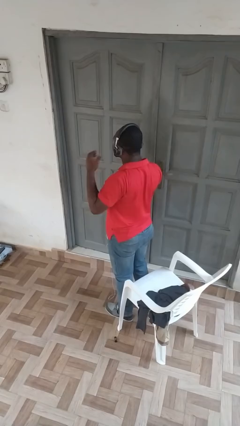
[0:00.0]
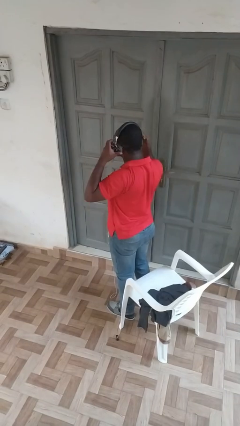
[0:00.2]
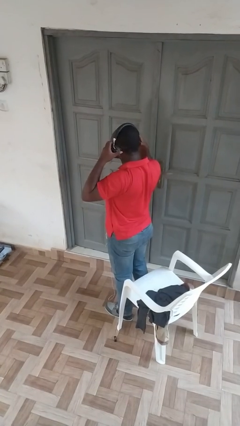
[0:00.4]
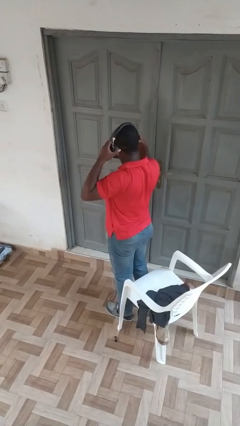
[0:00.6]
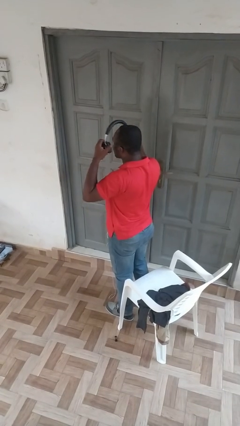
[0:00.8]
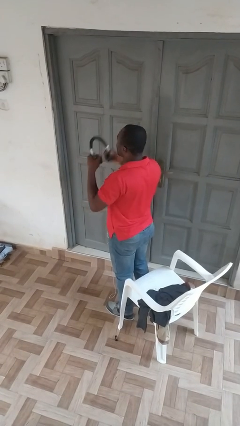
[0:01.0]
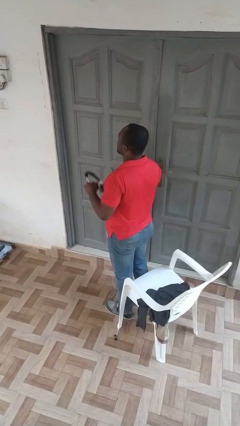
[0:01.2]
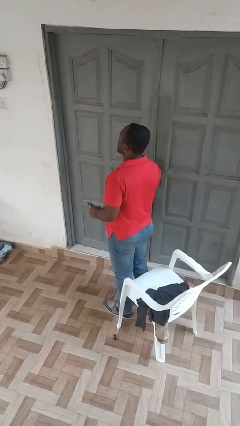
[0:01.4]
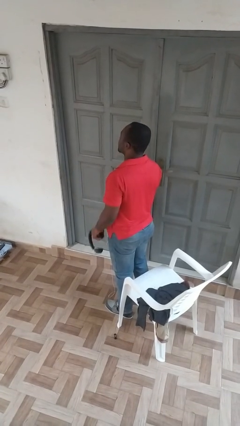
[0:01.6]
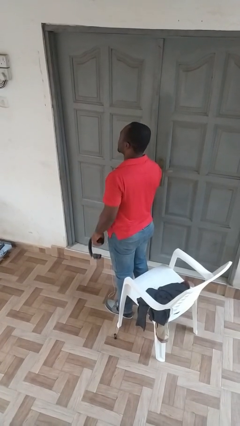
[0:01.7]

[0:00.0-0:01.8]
person takes off headphones

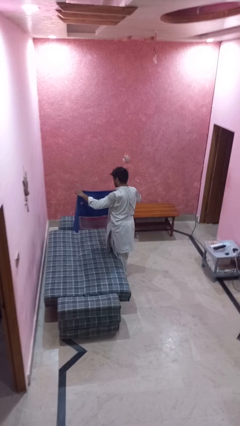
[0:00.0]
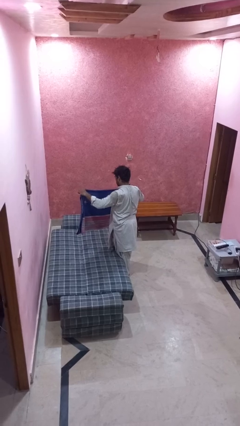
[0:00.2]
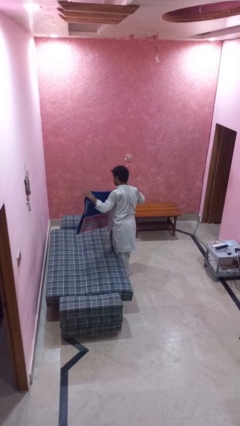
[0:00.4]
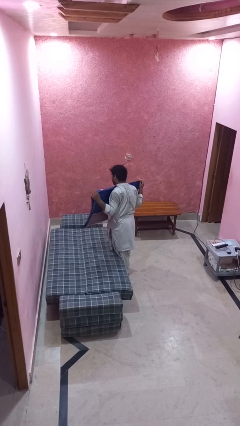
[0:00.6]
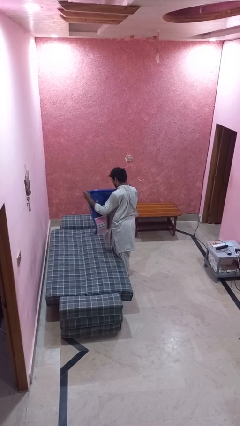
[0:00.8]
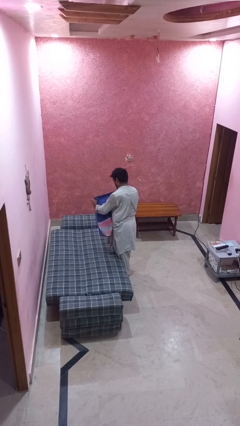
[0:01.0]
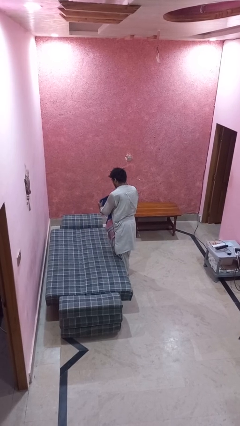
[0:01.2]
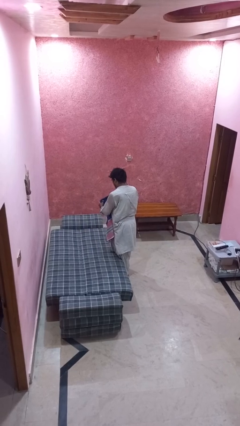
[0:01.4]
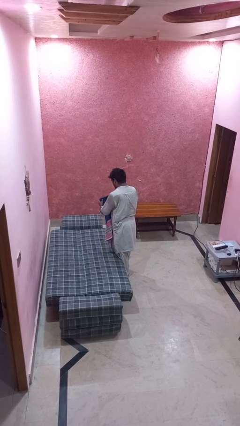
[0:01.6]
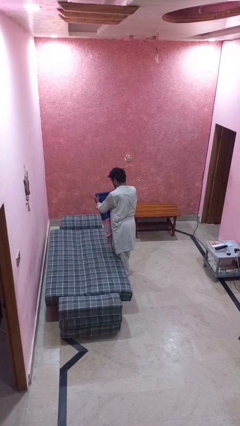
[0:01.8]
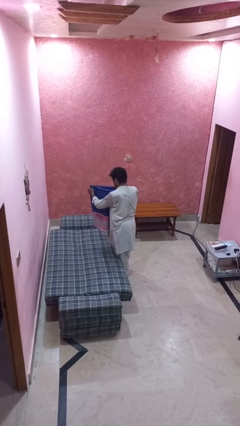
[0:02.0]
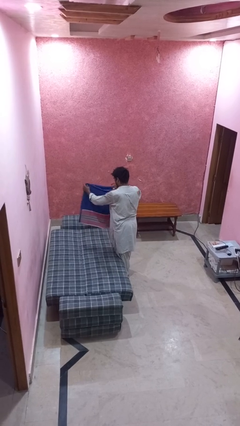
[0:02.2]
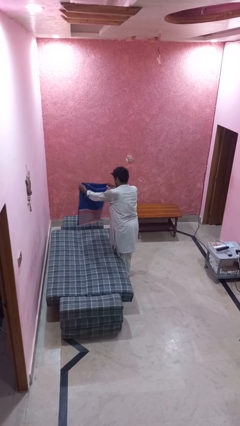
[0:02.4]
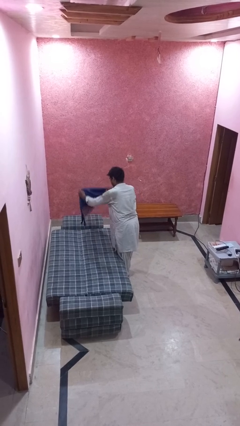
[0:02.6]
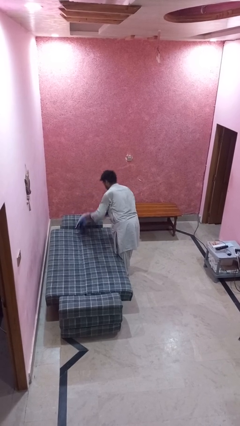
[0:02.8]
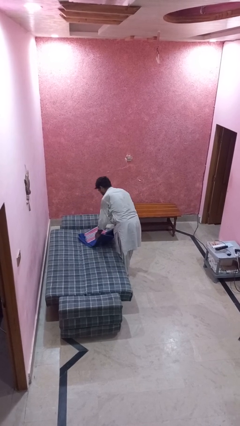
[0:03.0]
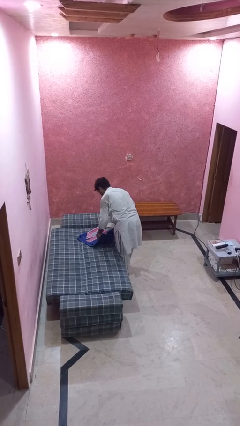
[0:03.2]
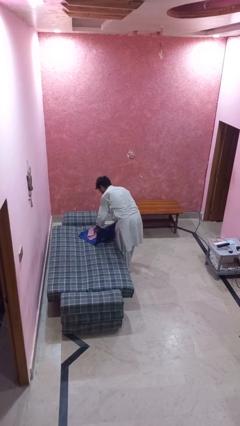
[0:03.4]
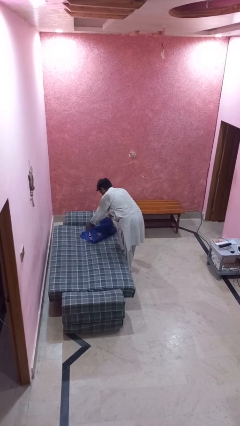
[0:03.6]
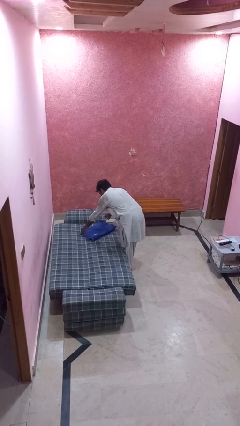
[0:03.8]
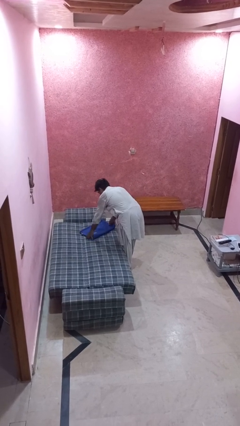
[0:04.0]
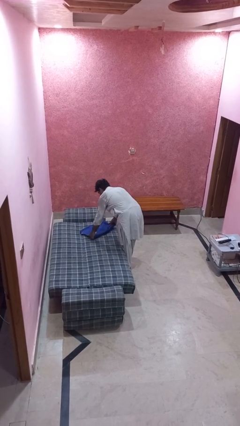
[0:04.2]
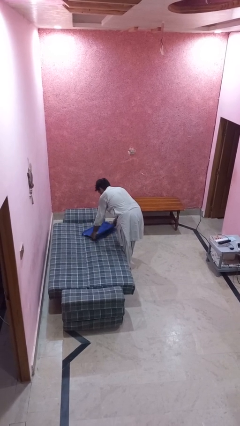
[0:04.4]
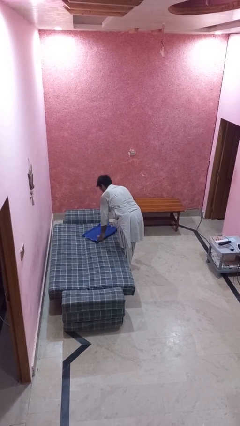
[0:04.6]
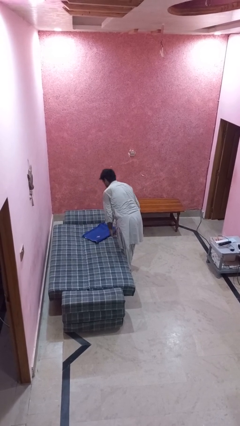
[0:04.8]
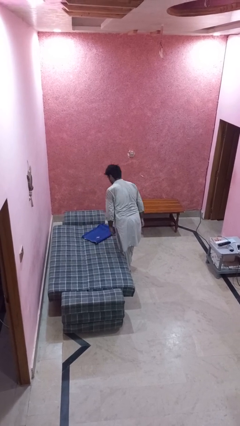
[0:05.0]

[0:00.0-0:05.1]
person folds blanket

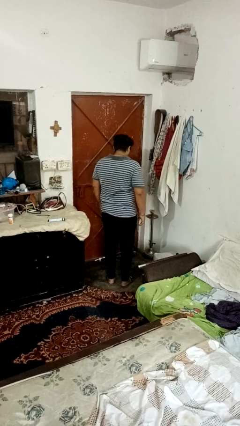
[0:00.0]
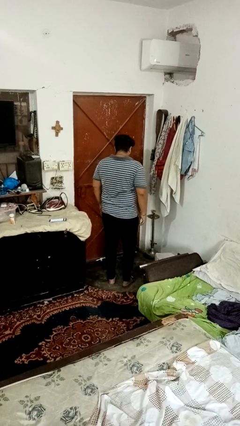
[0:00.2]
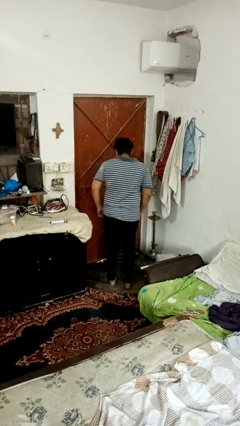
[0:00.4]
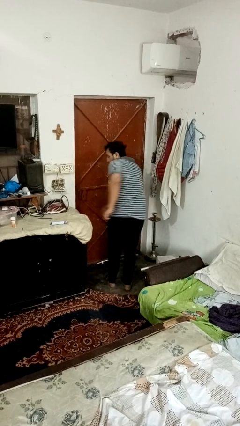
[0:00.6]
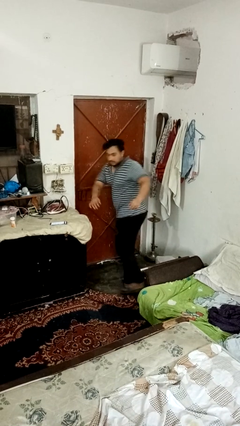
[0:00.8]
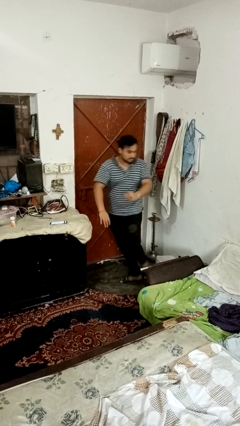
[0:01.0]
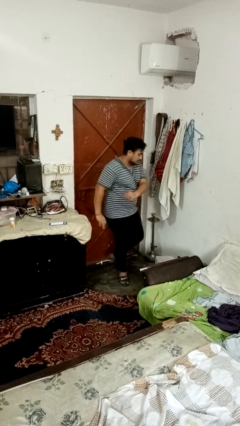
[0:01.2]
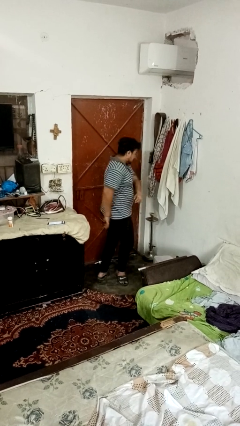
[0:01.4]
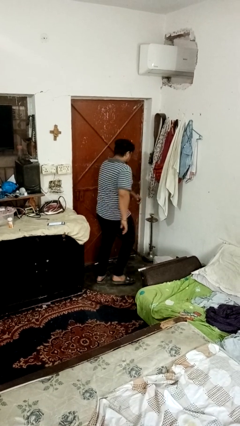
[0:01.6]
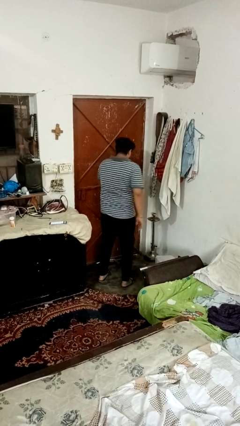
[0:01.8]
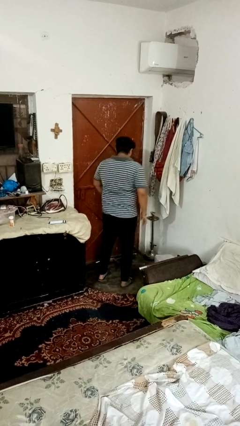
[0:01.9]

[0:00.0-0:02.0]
person twirls

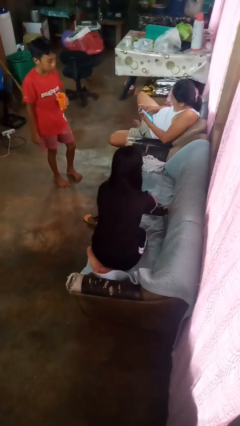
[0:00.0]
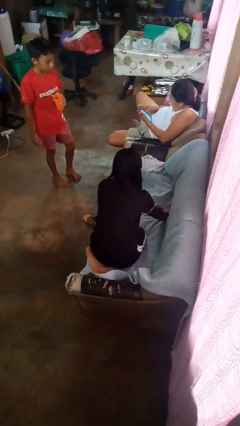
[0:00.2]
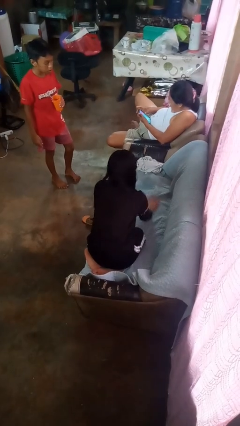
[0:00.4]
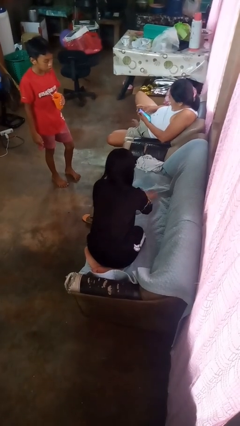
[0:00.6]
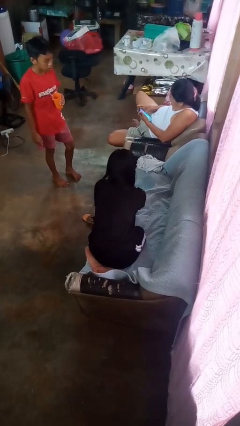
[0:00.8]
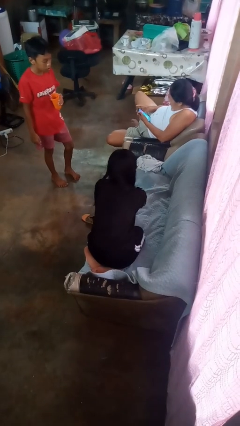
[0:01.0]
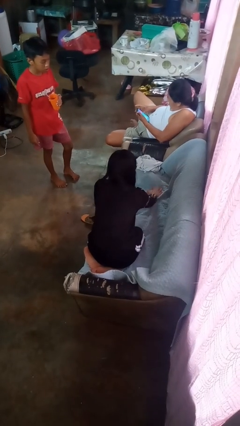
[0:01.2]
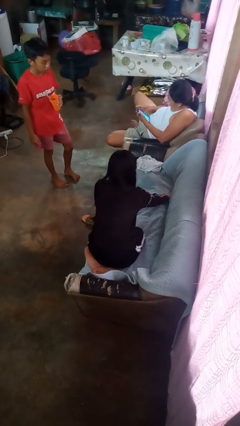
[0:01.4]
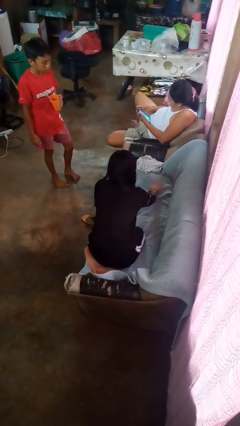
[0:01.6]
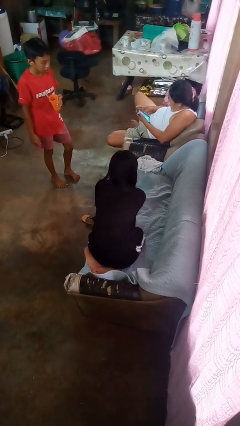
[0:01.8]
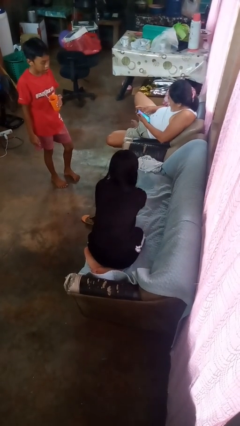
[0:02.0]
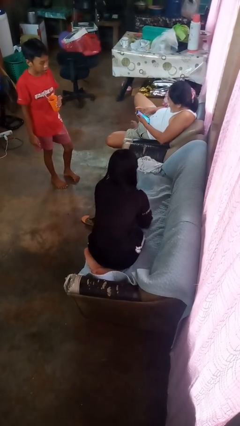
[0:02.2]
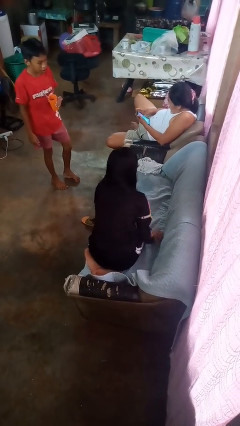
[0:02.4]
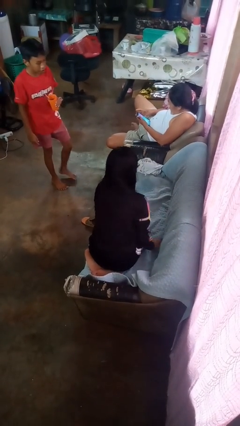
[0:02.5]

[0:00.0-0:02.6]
person searches in couch

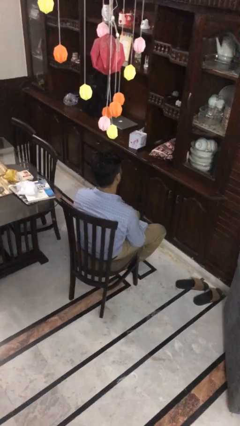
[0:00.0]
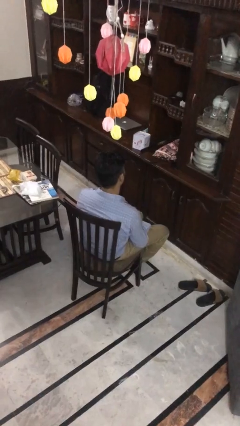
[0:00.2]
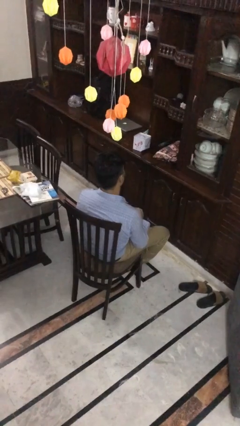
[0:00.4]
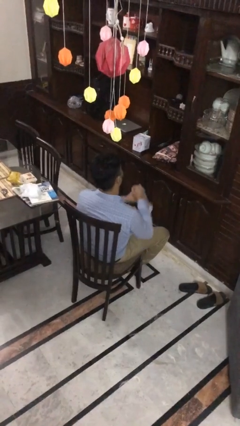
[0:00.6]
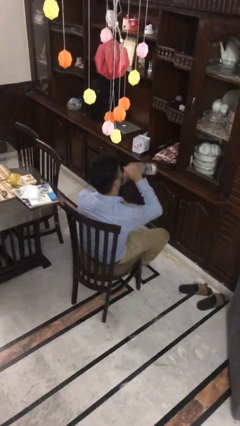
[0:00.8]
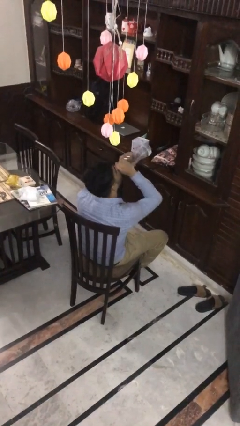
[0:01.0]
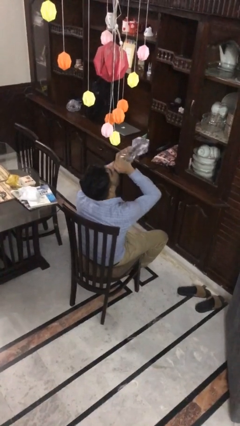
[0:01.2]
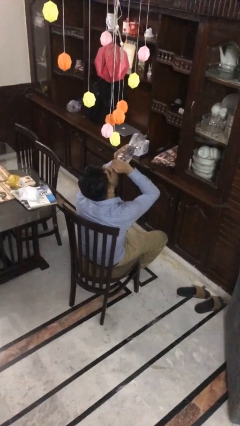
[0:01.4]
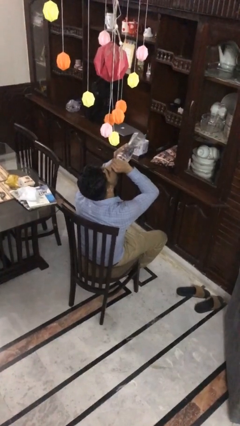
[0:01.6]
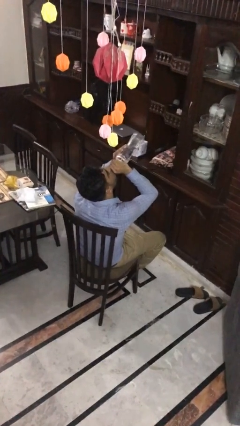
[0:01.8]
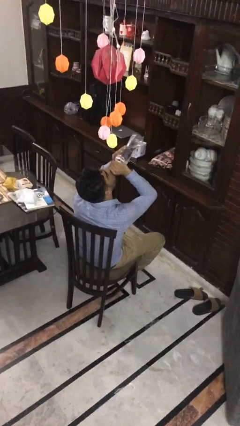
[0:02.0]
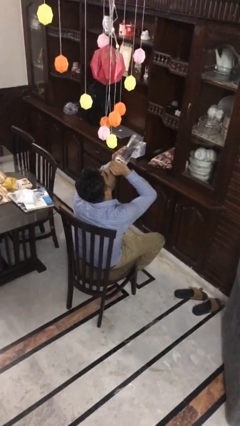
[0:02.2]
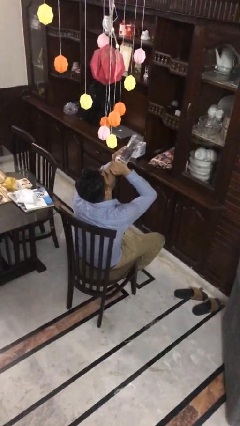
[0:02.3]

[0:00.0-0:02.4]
person drinks from bottle

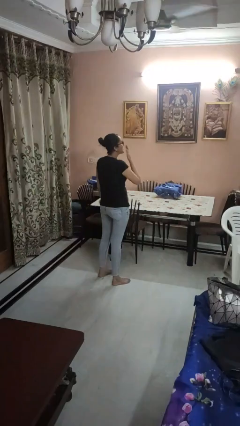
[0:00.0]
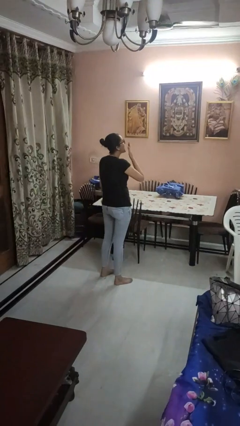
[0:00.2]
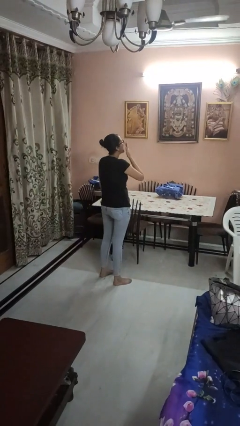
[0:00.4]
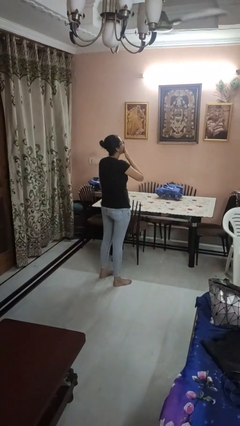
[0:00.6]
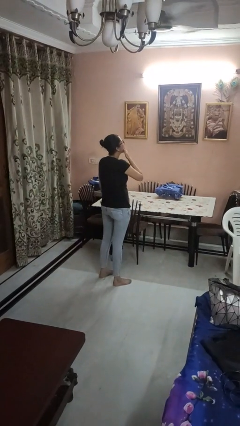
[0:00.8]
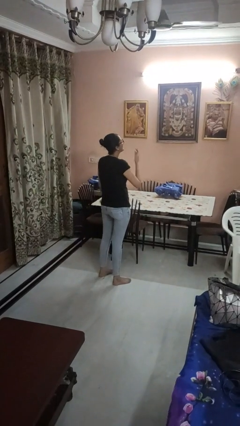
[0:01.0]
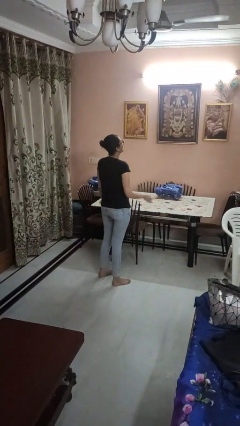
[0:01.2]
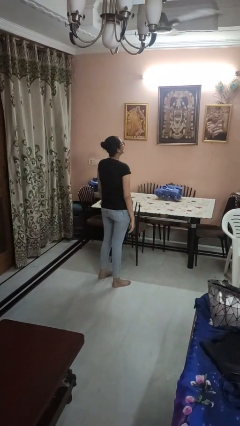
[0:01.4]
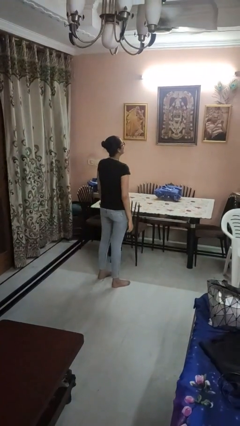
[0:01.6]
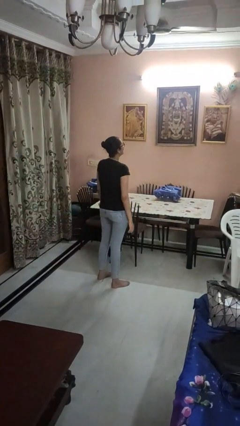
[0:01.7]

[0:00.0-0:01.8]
person yawns

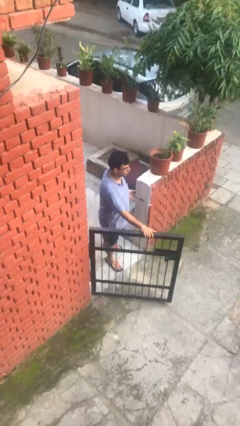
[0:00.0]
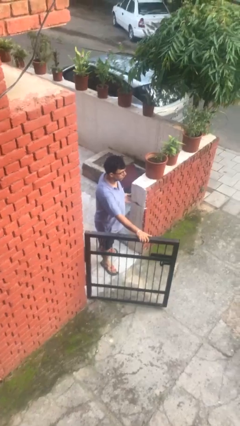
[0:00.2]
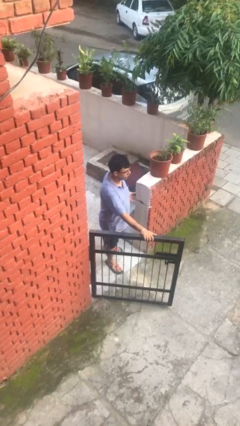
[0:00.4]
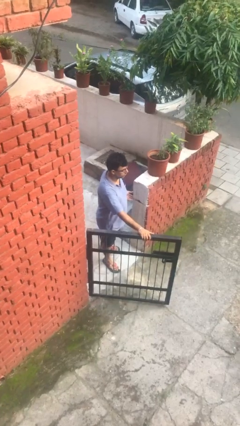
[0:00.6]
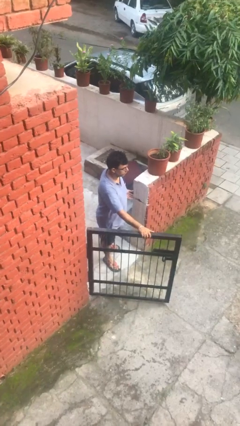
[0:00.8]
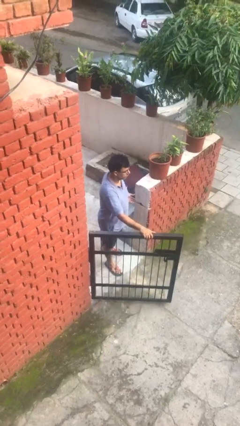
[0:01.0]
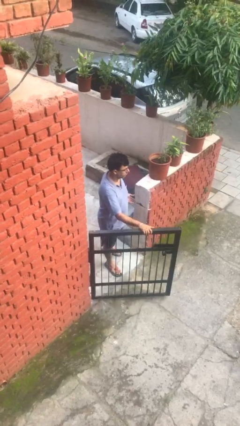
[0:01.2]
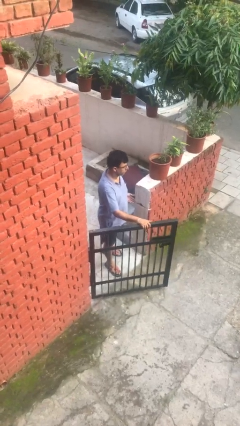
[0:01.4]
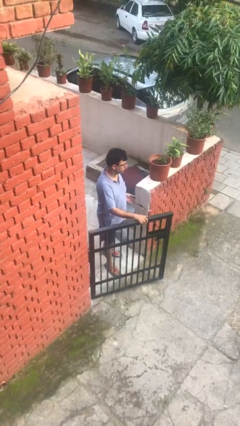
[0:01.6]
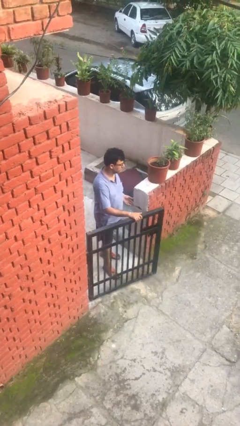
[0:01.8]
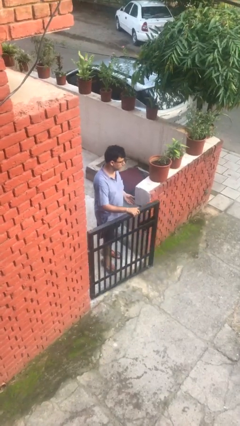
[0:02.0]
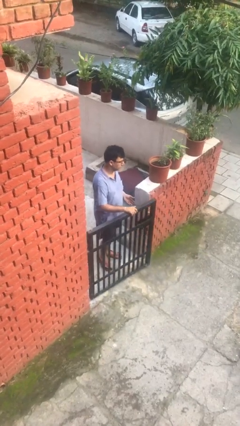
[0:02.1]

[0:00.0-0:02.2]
person closes gate
